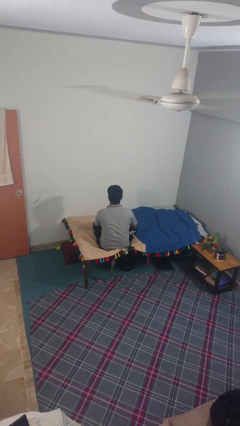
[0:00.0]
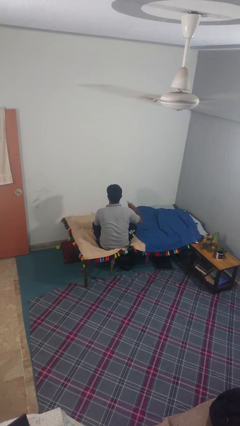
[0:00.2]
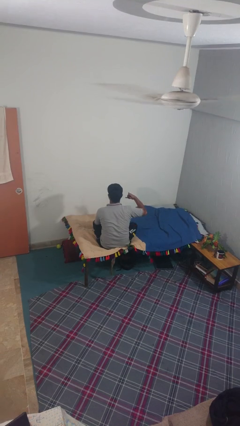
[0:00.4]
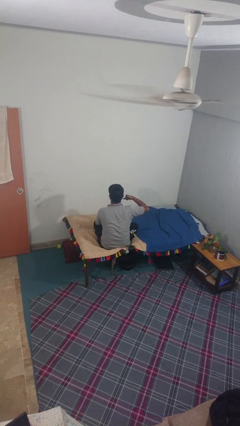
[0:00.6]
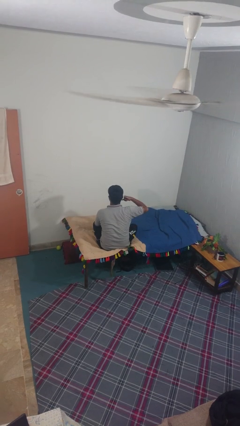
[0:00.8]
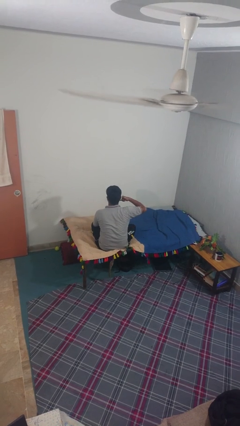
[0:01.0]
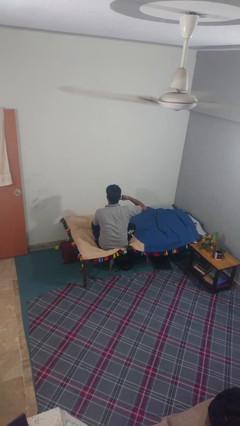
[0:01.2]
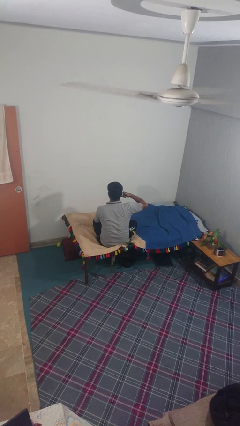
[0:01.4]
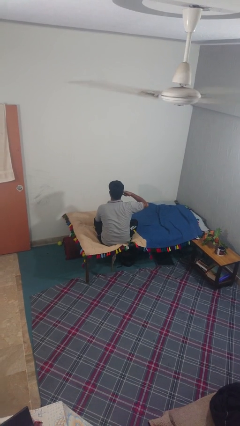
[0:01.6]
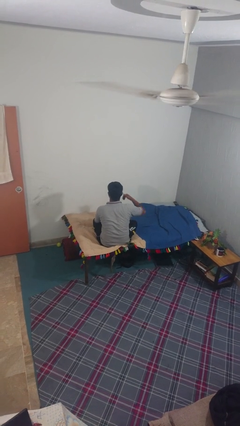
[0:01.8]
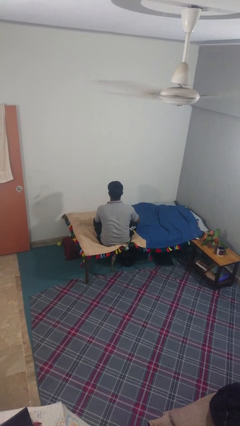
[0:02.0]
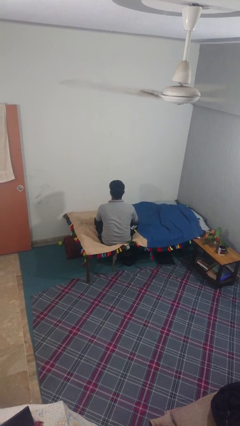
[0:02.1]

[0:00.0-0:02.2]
person gestures call me

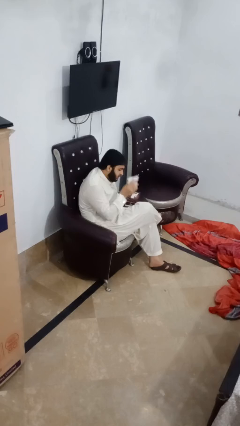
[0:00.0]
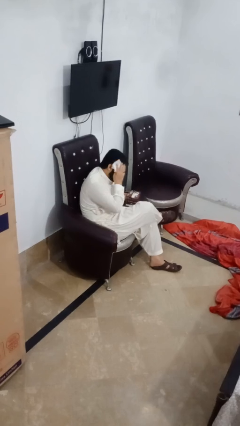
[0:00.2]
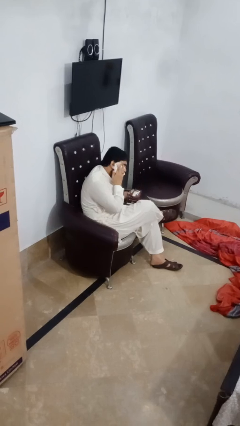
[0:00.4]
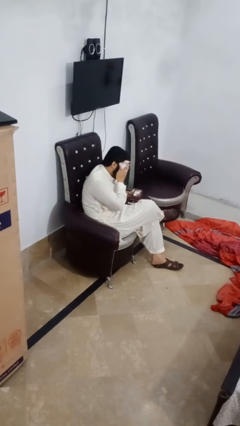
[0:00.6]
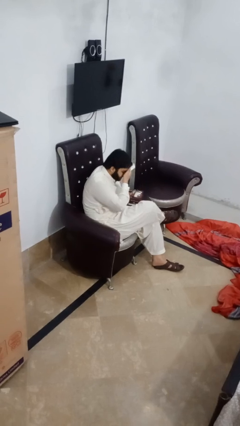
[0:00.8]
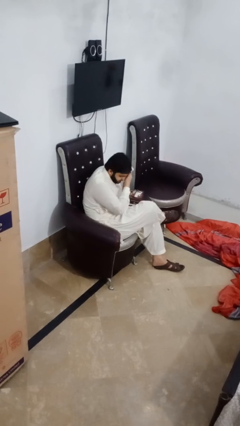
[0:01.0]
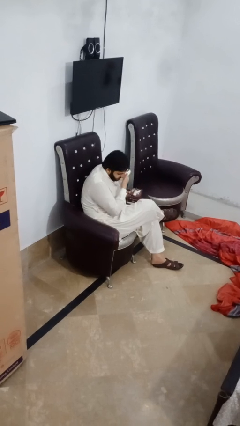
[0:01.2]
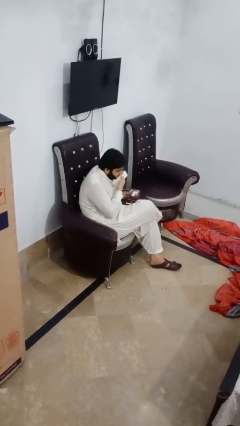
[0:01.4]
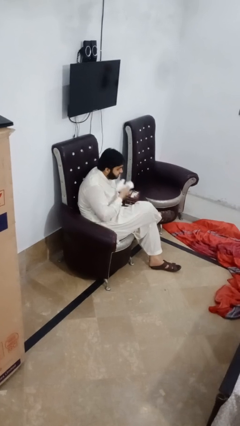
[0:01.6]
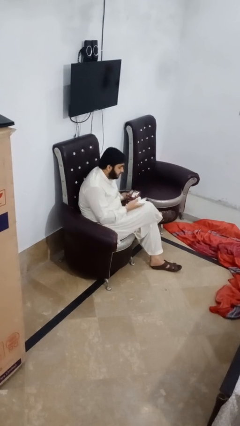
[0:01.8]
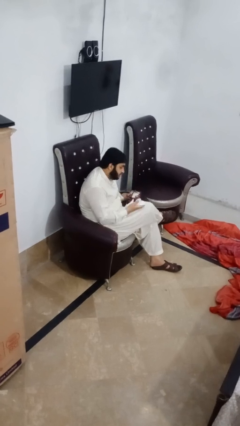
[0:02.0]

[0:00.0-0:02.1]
person wipes mouth with napkin

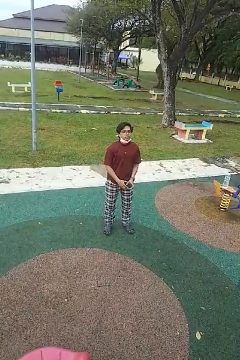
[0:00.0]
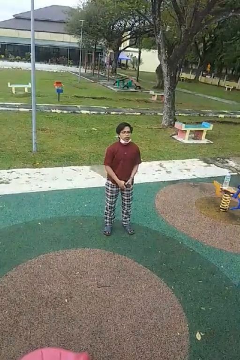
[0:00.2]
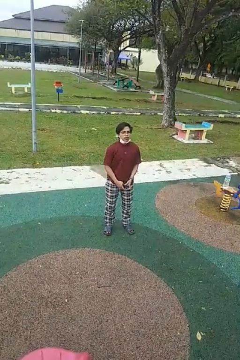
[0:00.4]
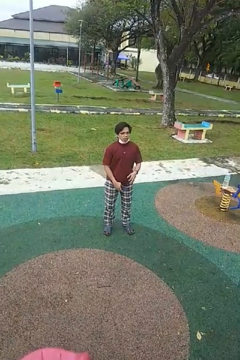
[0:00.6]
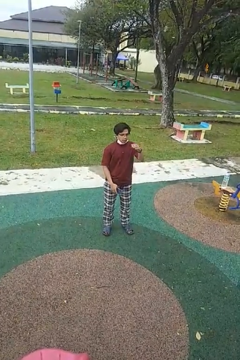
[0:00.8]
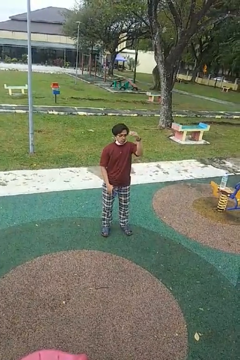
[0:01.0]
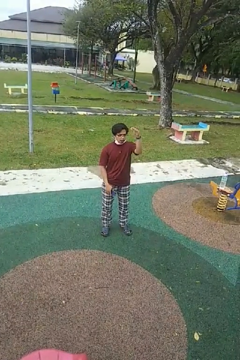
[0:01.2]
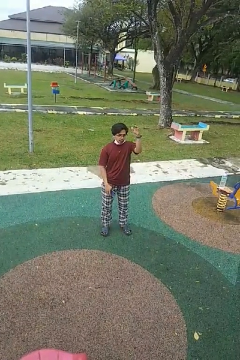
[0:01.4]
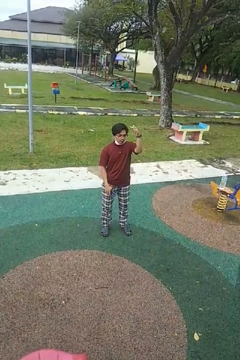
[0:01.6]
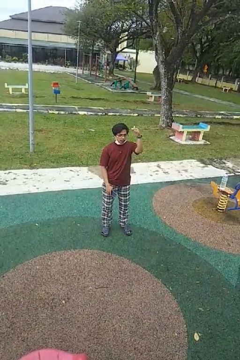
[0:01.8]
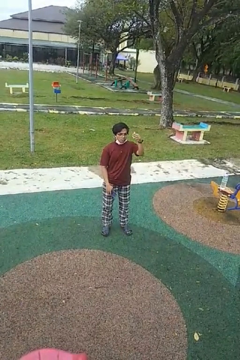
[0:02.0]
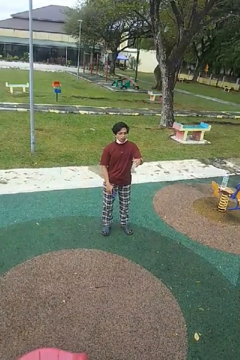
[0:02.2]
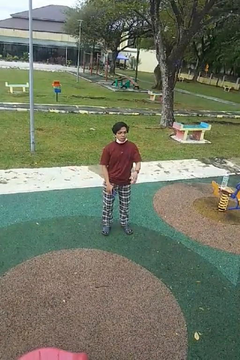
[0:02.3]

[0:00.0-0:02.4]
person gestures come here

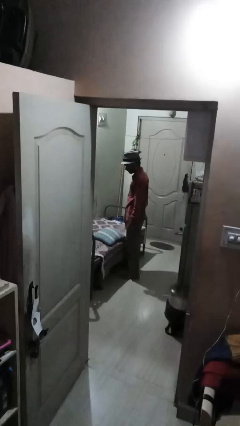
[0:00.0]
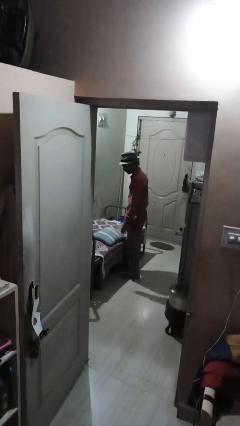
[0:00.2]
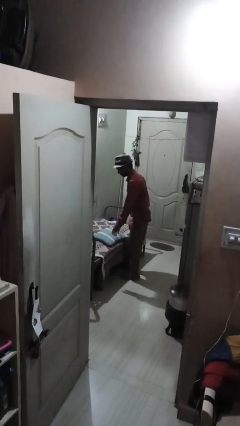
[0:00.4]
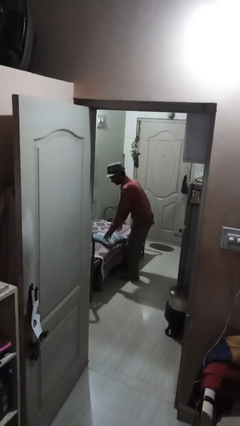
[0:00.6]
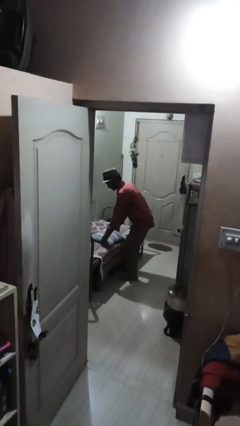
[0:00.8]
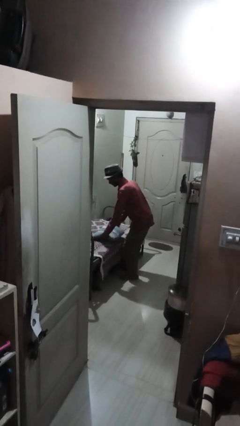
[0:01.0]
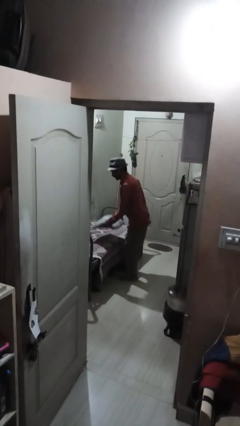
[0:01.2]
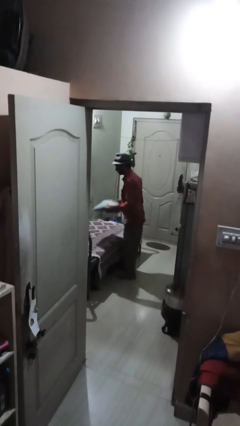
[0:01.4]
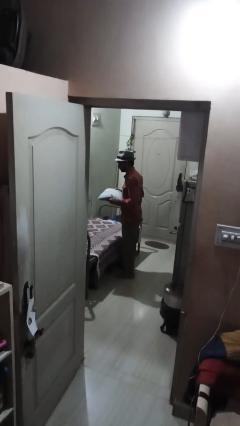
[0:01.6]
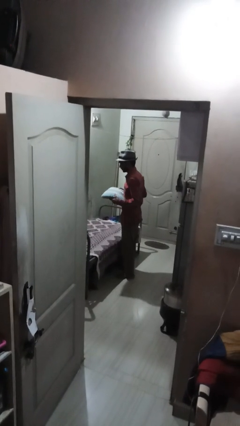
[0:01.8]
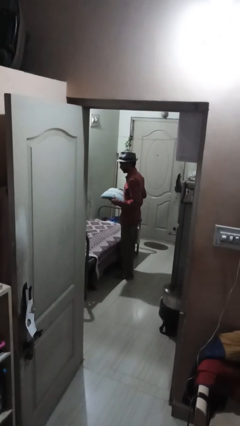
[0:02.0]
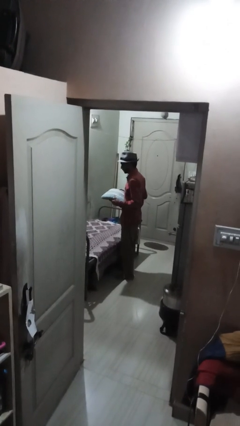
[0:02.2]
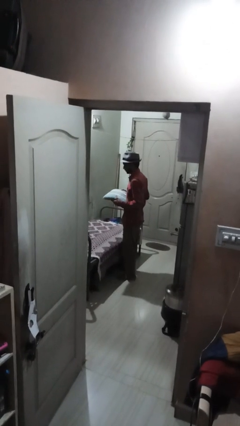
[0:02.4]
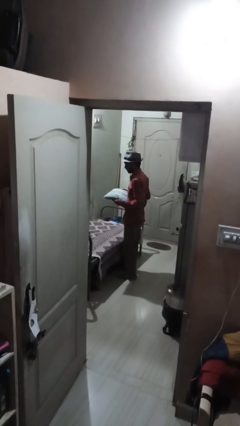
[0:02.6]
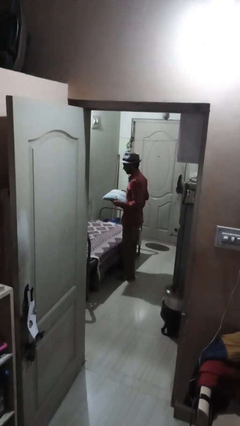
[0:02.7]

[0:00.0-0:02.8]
person picks up object from bed

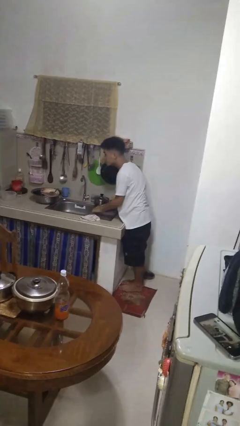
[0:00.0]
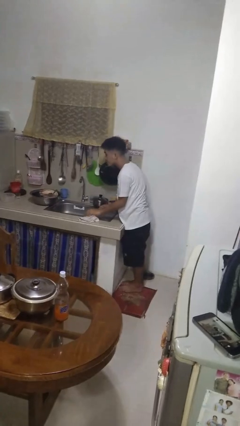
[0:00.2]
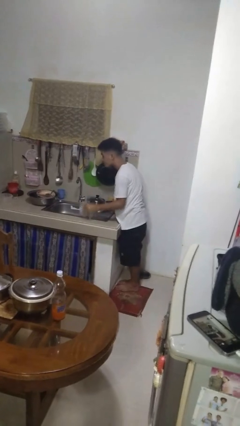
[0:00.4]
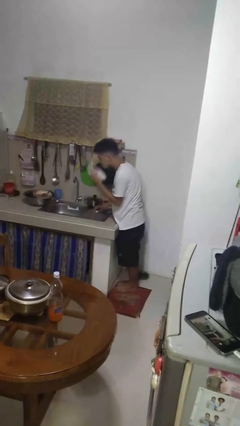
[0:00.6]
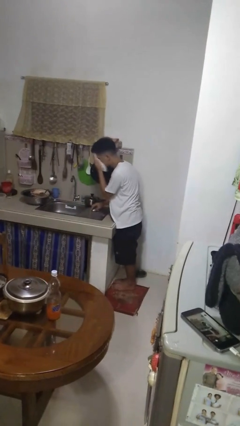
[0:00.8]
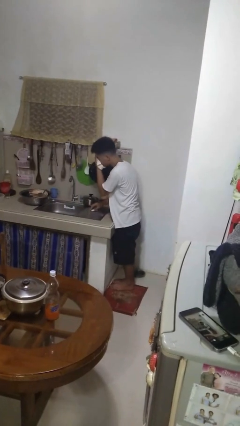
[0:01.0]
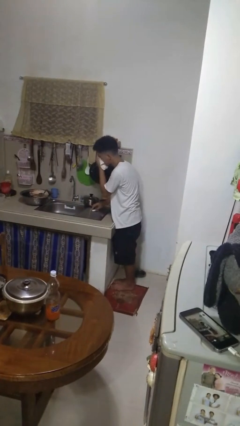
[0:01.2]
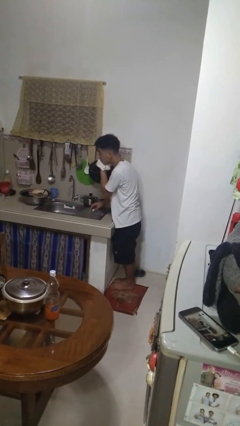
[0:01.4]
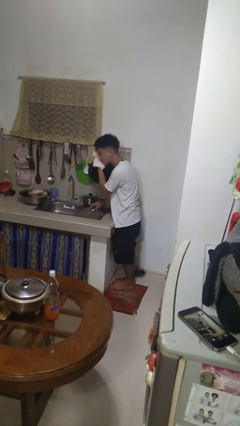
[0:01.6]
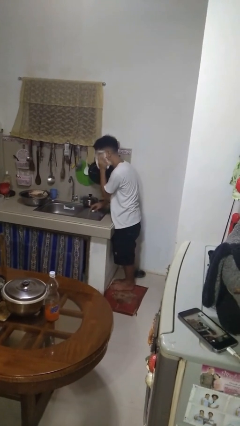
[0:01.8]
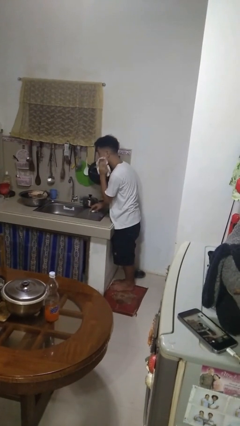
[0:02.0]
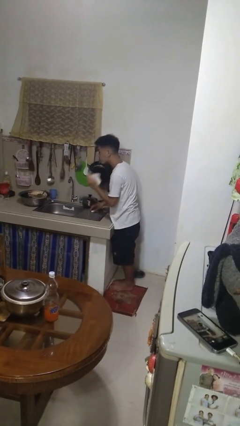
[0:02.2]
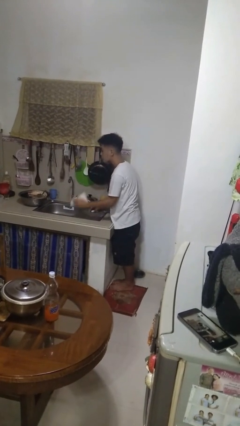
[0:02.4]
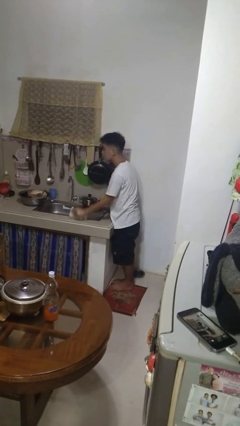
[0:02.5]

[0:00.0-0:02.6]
person dries face with towel

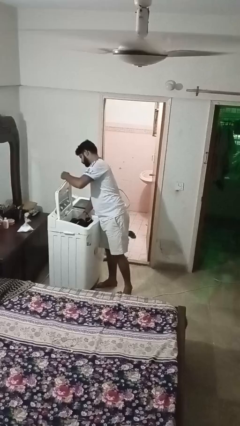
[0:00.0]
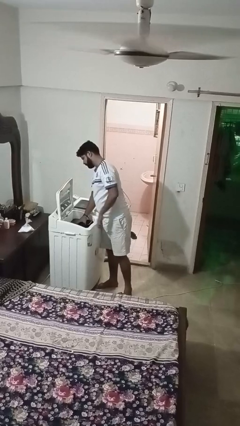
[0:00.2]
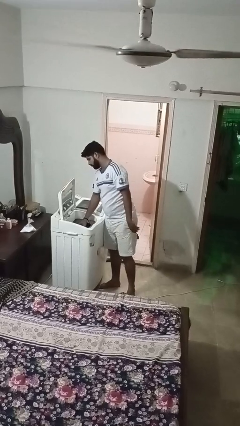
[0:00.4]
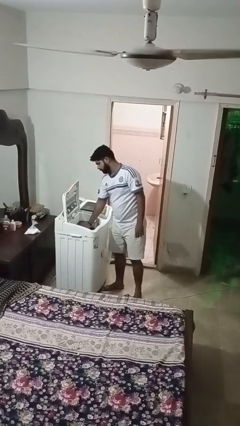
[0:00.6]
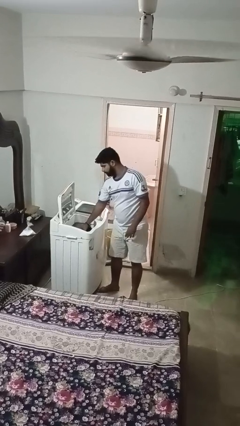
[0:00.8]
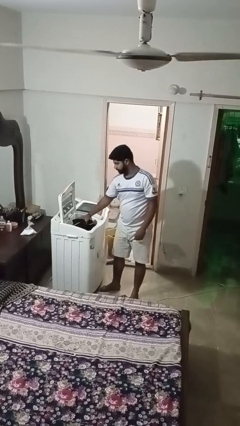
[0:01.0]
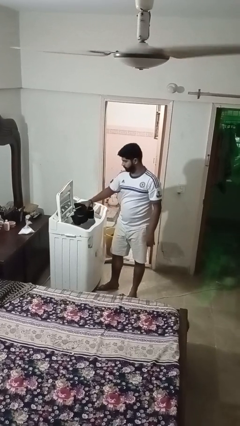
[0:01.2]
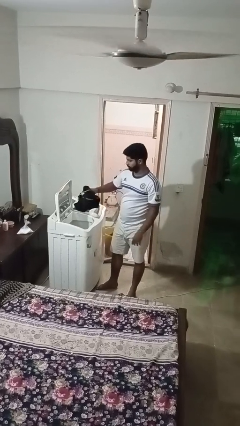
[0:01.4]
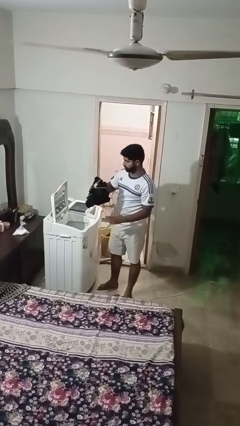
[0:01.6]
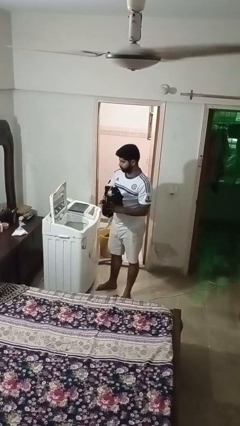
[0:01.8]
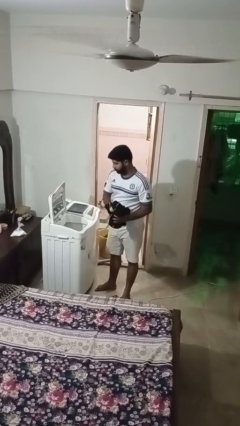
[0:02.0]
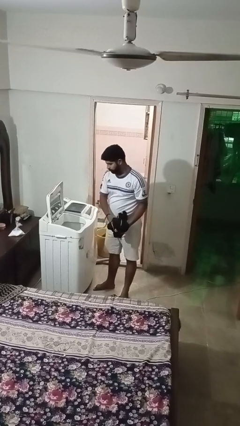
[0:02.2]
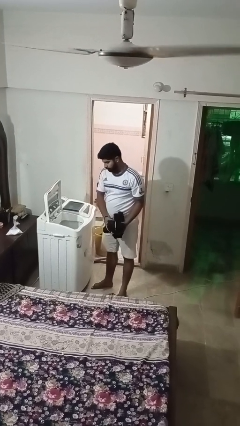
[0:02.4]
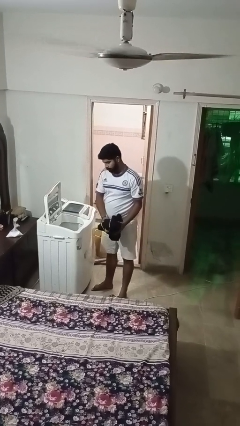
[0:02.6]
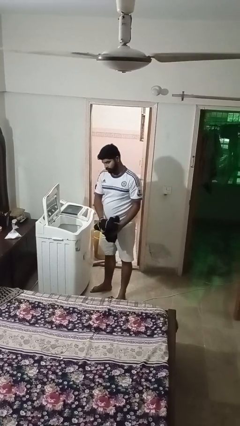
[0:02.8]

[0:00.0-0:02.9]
person unloads clotheswasher

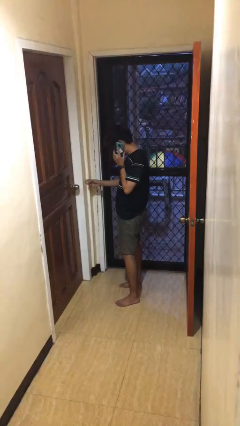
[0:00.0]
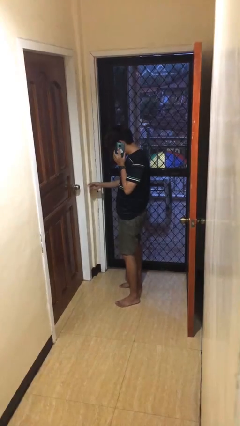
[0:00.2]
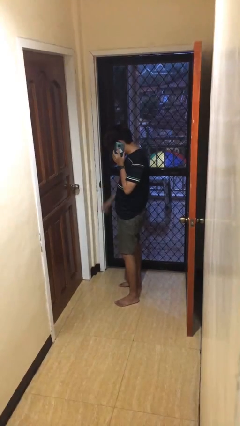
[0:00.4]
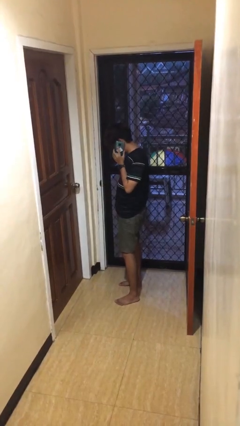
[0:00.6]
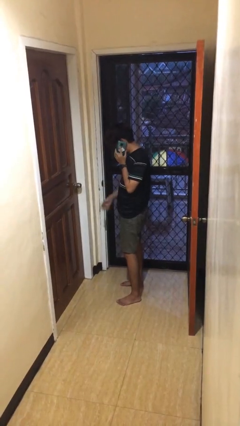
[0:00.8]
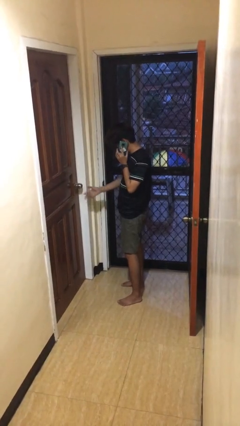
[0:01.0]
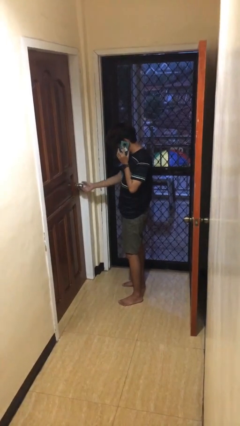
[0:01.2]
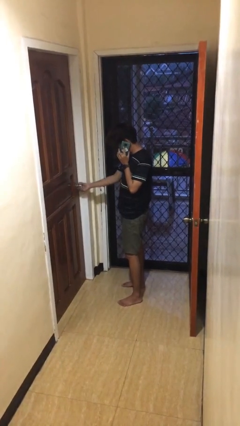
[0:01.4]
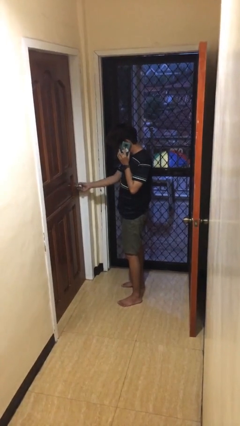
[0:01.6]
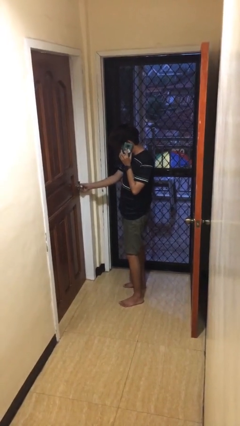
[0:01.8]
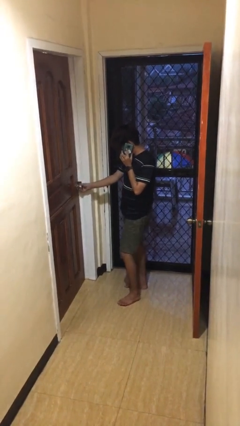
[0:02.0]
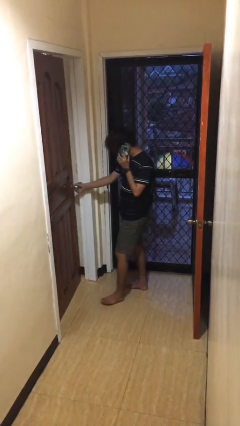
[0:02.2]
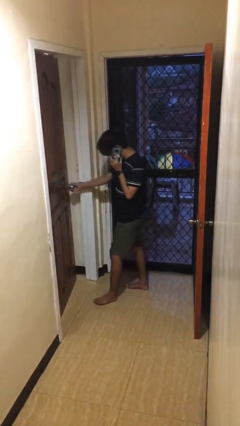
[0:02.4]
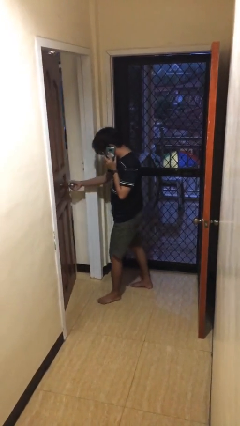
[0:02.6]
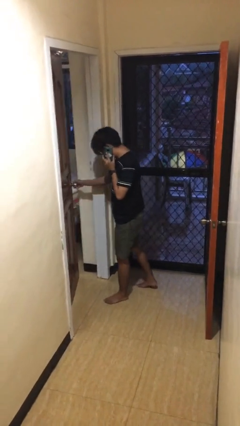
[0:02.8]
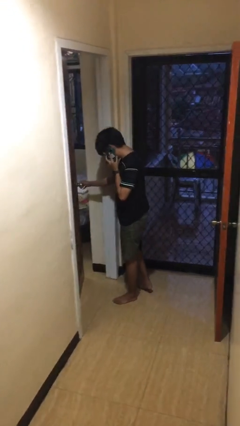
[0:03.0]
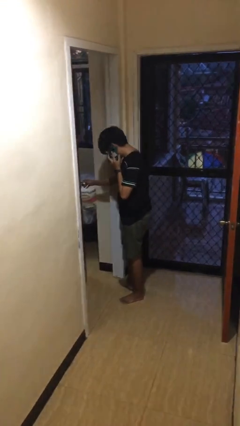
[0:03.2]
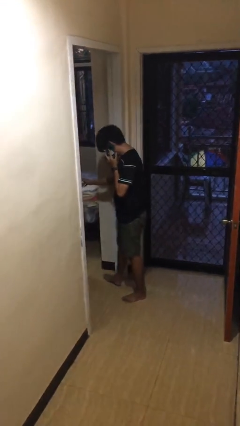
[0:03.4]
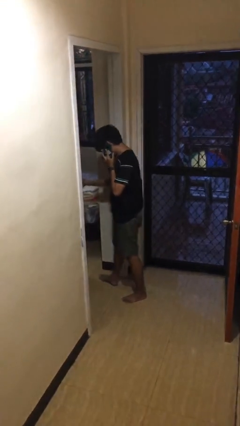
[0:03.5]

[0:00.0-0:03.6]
person opens facility door
